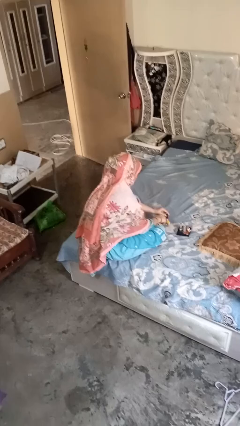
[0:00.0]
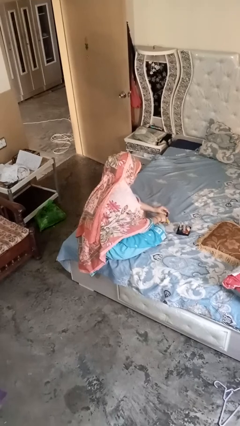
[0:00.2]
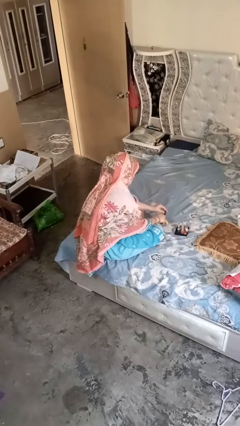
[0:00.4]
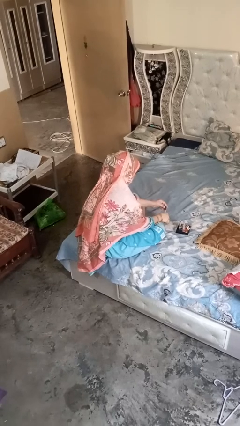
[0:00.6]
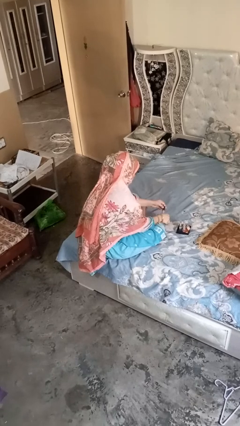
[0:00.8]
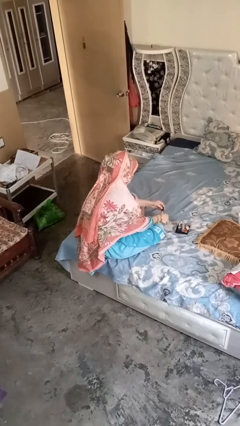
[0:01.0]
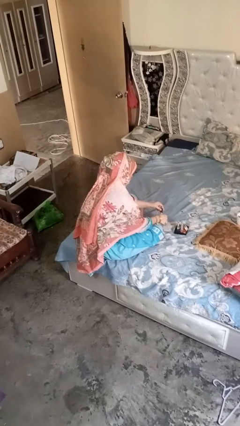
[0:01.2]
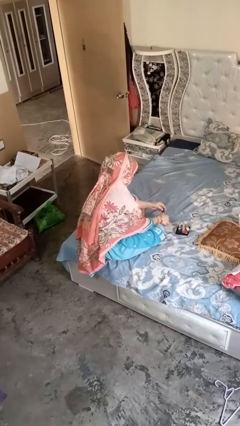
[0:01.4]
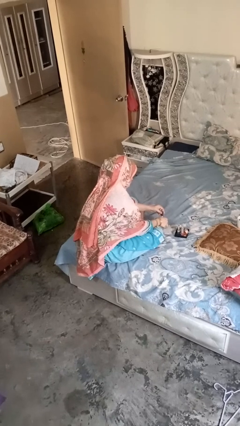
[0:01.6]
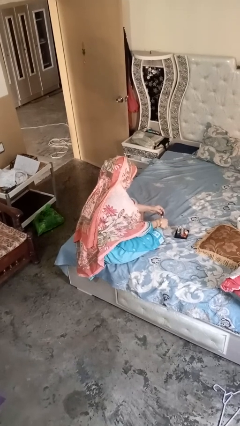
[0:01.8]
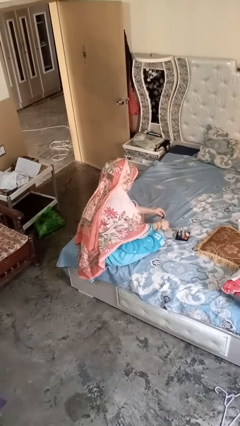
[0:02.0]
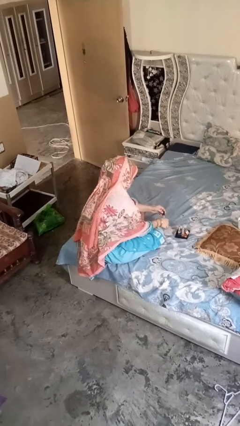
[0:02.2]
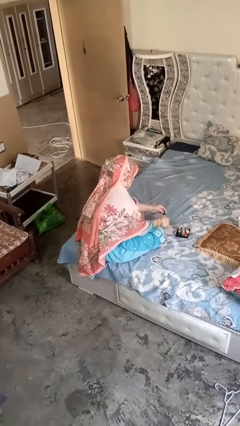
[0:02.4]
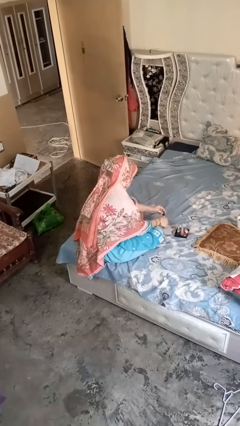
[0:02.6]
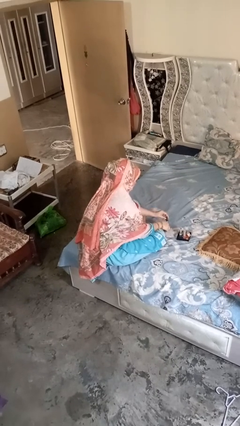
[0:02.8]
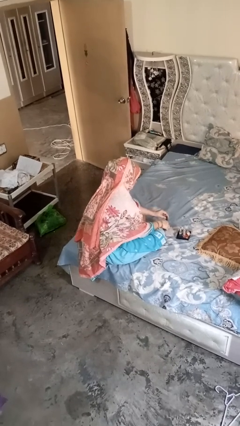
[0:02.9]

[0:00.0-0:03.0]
person paints fingernails

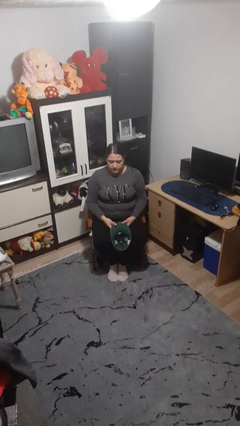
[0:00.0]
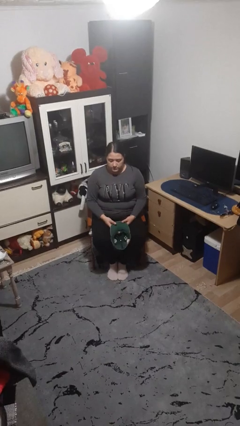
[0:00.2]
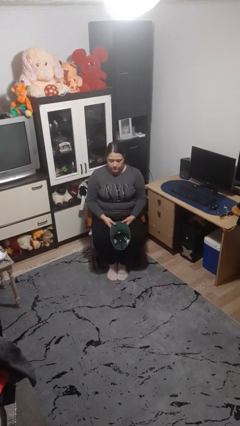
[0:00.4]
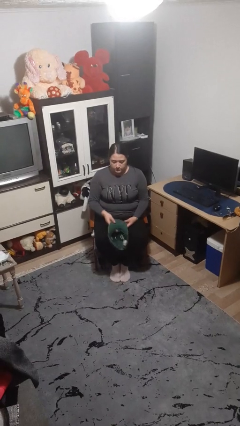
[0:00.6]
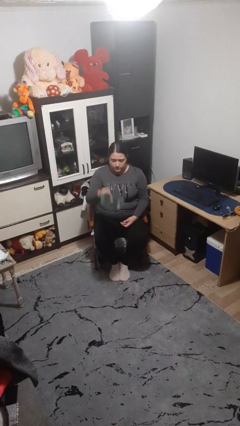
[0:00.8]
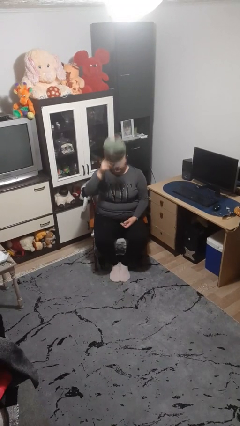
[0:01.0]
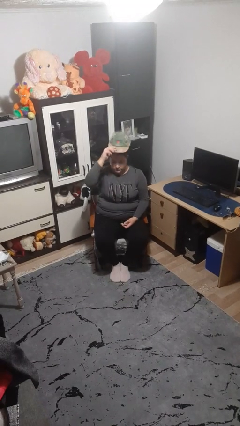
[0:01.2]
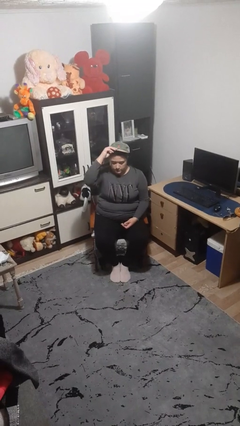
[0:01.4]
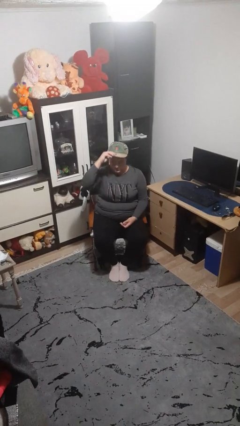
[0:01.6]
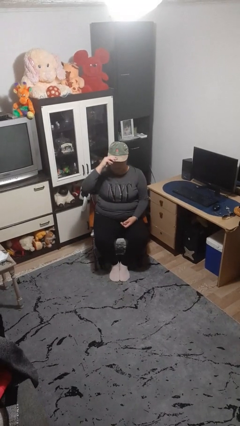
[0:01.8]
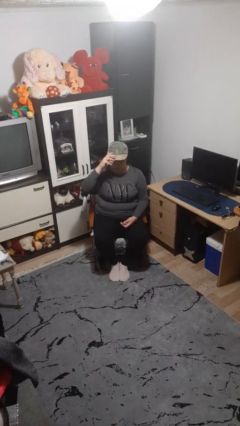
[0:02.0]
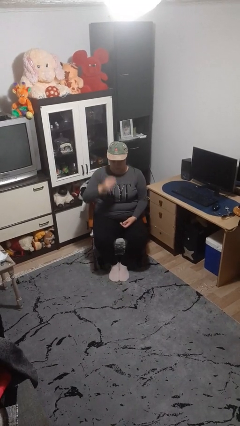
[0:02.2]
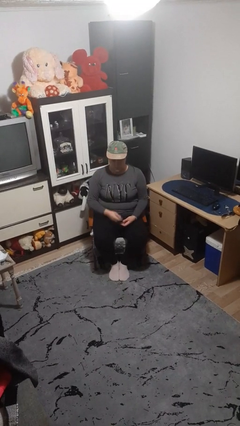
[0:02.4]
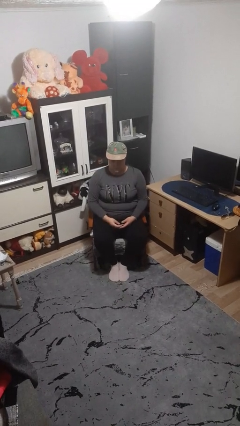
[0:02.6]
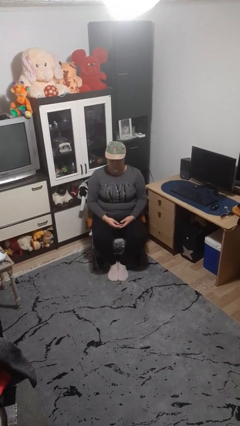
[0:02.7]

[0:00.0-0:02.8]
person puts on hat

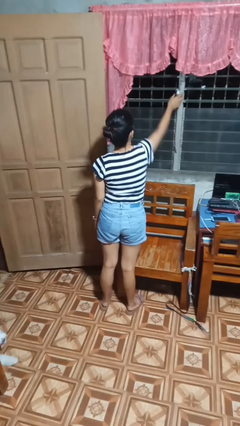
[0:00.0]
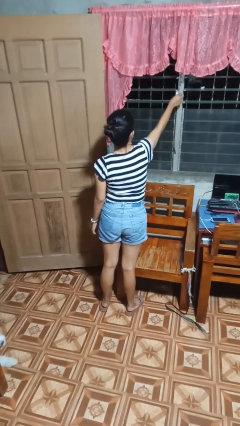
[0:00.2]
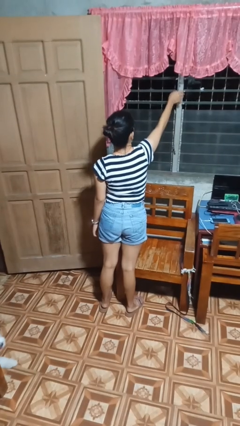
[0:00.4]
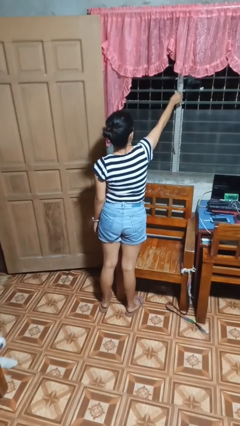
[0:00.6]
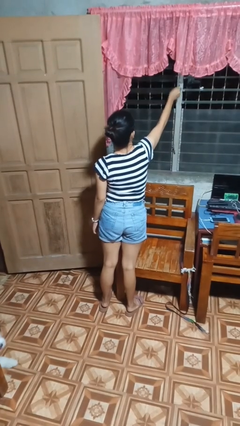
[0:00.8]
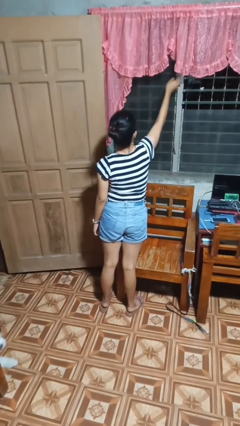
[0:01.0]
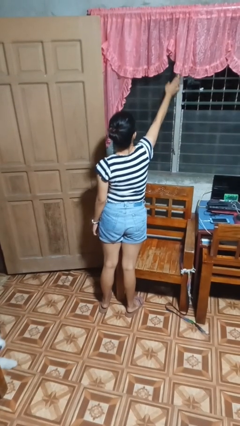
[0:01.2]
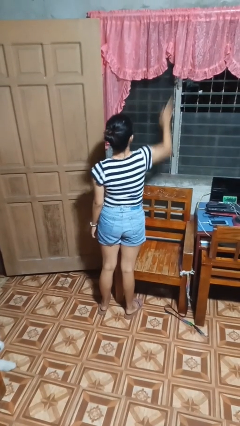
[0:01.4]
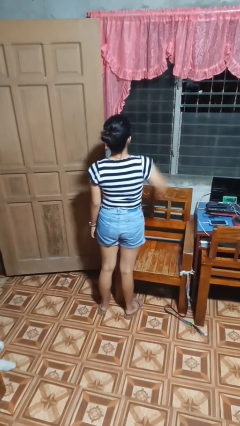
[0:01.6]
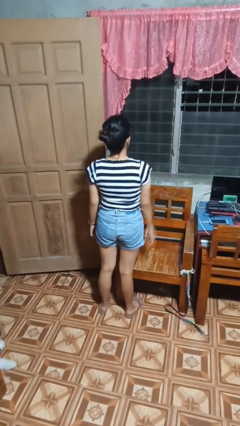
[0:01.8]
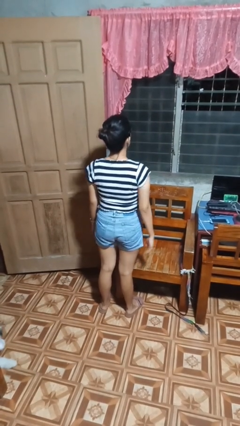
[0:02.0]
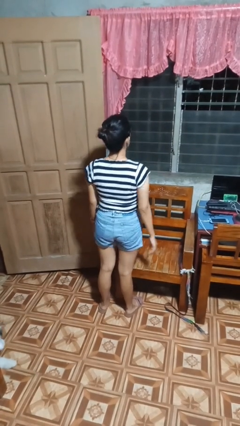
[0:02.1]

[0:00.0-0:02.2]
person closes home window

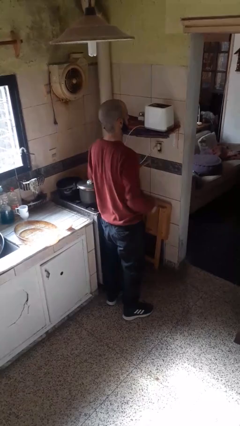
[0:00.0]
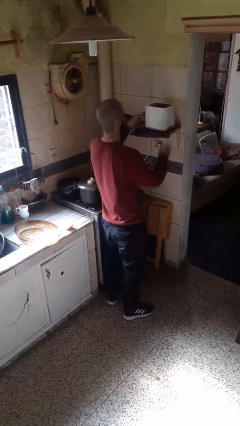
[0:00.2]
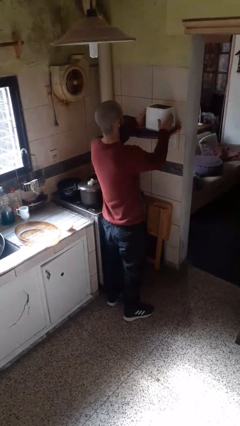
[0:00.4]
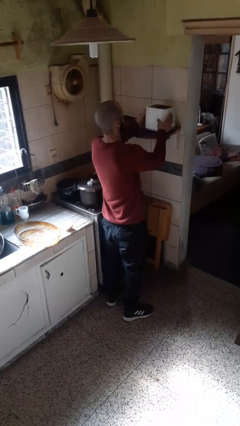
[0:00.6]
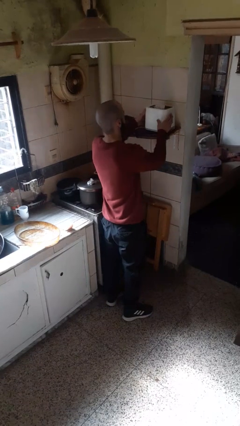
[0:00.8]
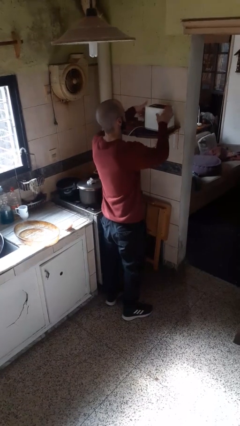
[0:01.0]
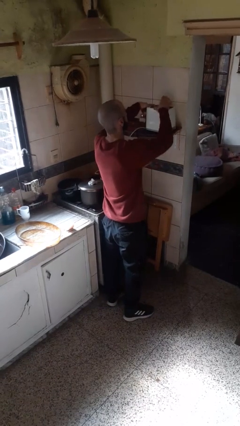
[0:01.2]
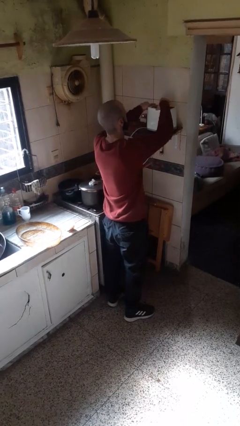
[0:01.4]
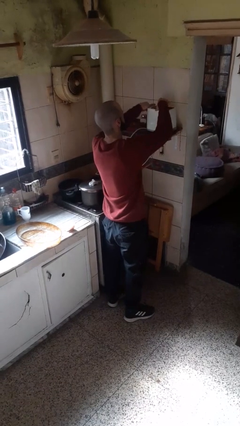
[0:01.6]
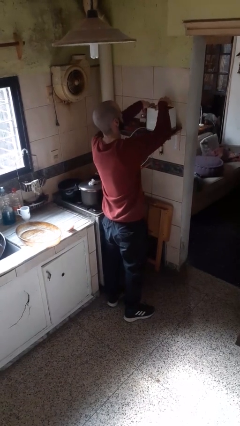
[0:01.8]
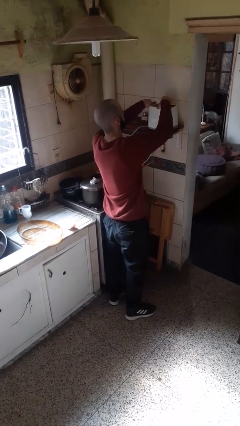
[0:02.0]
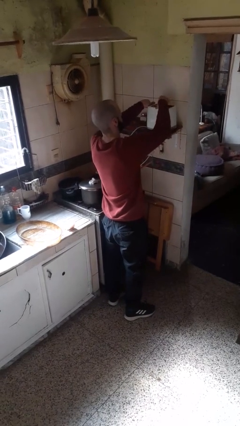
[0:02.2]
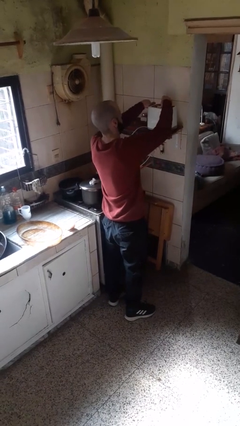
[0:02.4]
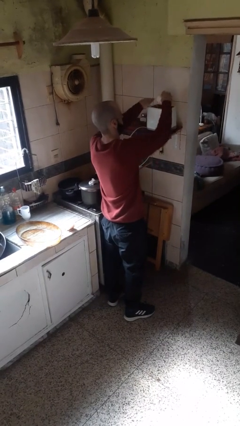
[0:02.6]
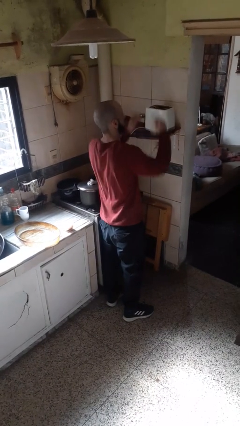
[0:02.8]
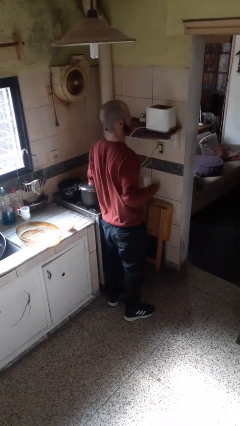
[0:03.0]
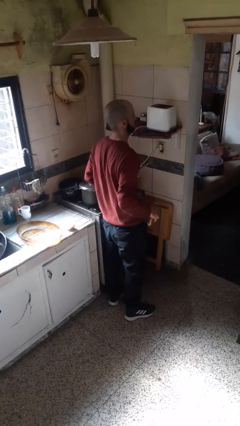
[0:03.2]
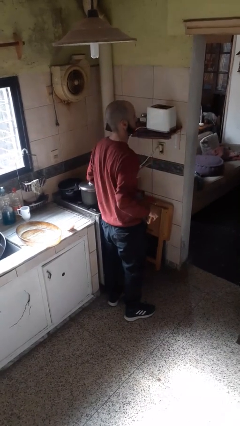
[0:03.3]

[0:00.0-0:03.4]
person takes object from toaster

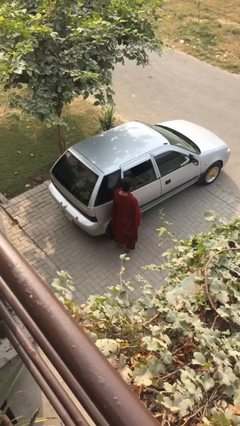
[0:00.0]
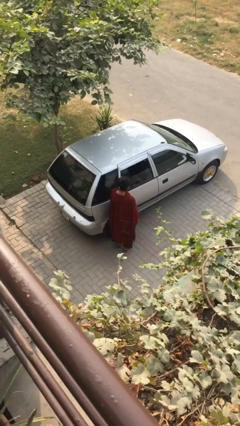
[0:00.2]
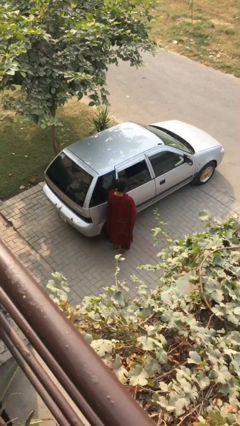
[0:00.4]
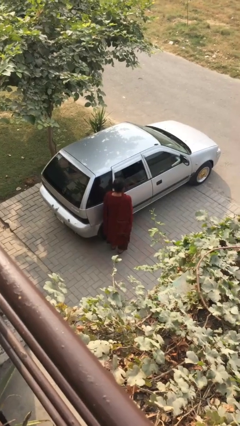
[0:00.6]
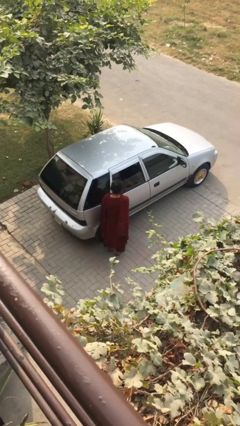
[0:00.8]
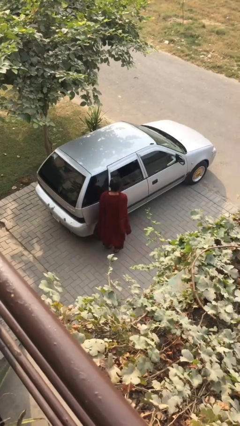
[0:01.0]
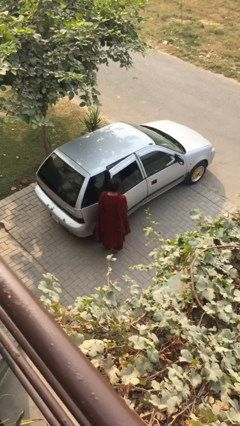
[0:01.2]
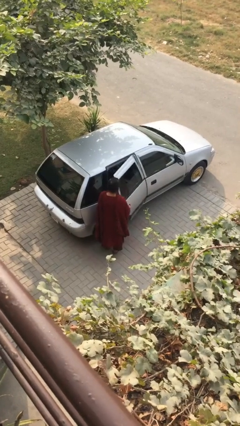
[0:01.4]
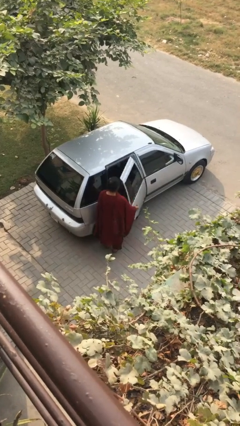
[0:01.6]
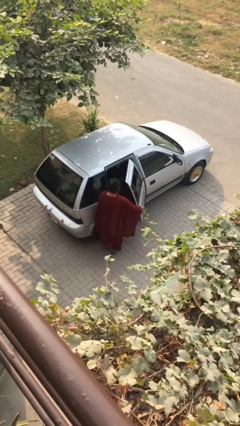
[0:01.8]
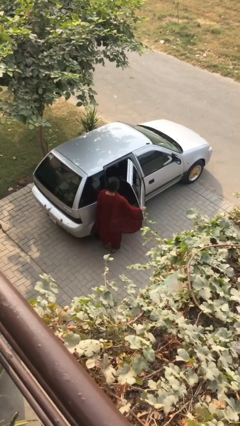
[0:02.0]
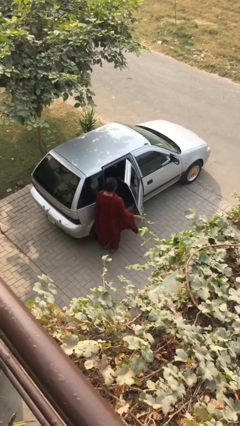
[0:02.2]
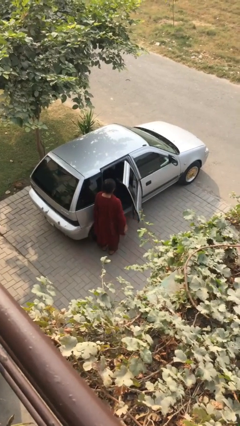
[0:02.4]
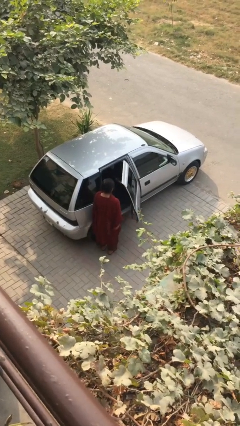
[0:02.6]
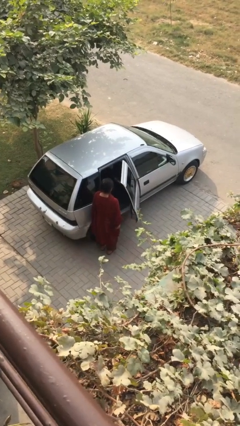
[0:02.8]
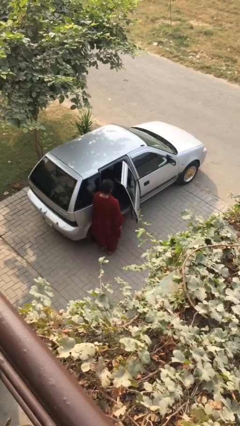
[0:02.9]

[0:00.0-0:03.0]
person opens car door

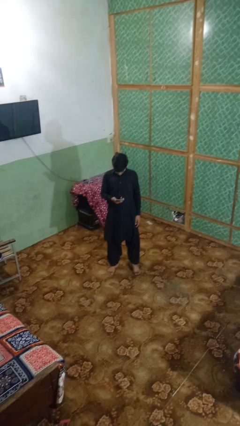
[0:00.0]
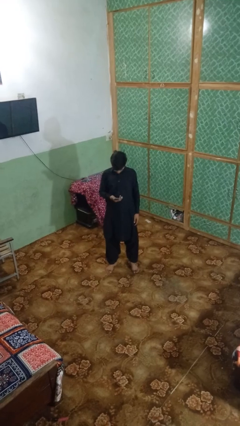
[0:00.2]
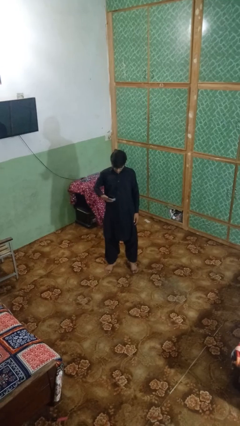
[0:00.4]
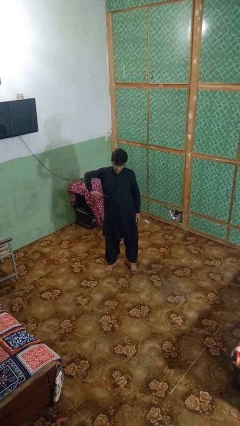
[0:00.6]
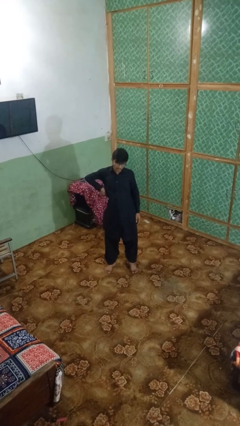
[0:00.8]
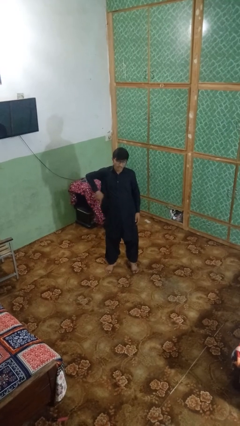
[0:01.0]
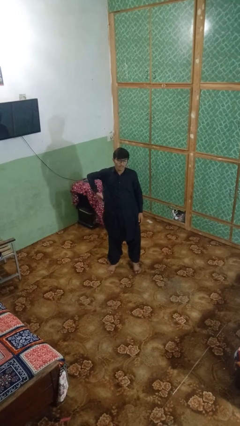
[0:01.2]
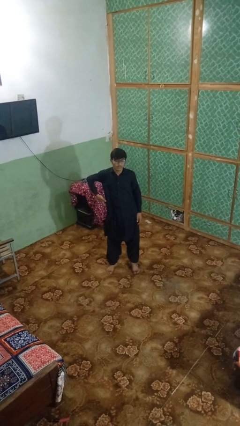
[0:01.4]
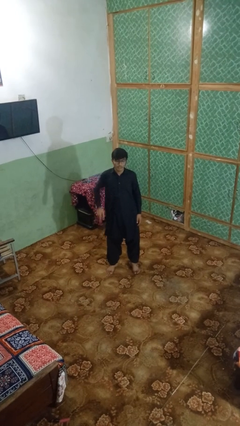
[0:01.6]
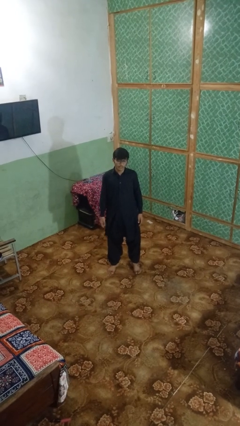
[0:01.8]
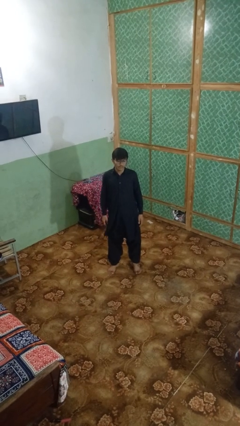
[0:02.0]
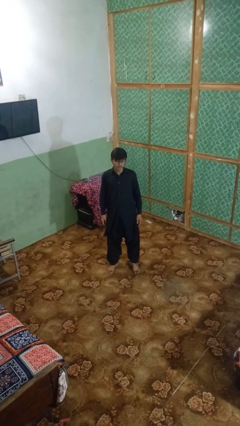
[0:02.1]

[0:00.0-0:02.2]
person puts phone into pocket

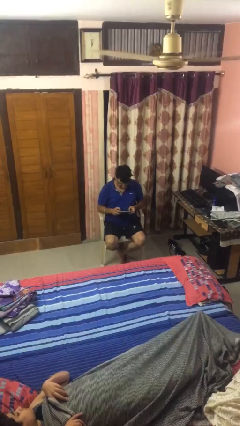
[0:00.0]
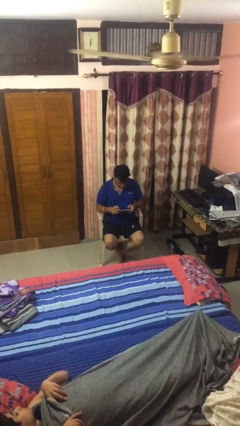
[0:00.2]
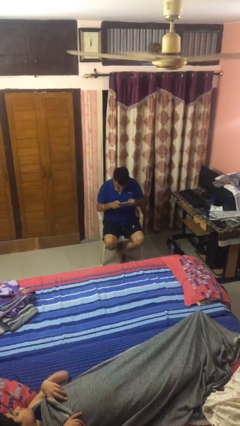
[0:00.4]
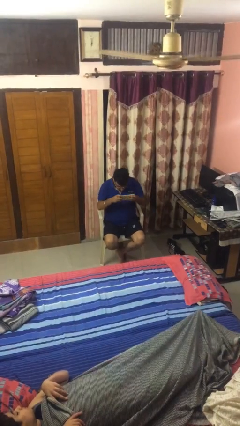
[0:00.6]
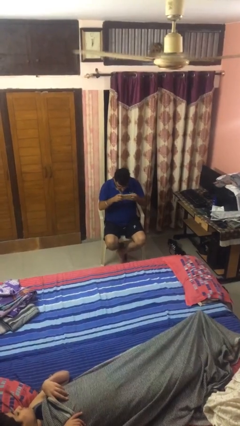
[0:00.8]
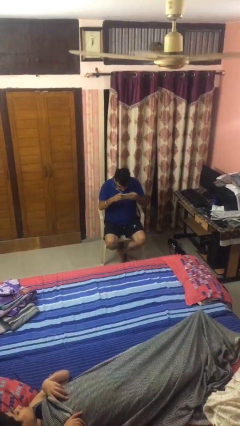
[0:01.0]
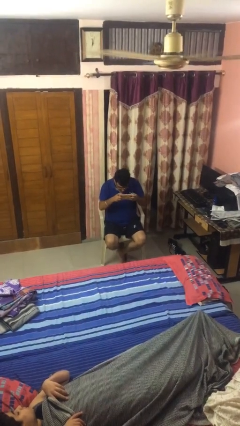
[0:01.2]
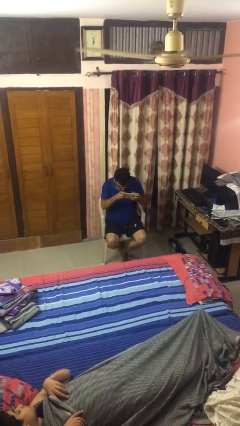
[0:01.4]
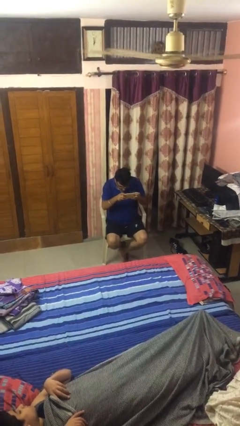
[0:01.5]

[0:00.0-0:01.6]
person interacts with handheld game
